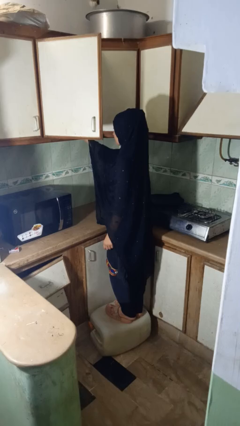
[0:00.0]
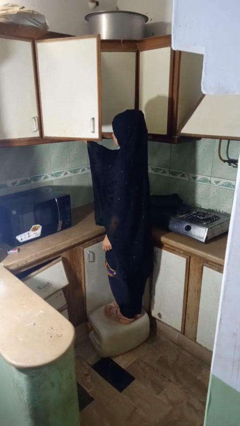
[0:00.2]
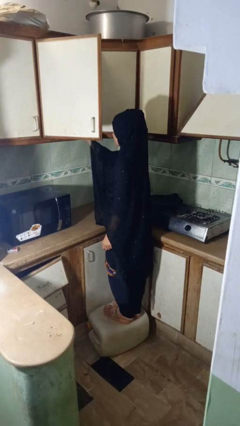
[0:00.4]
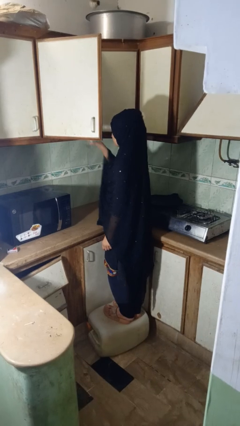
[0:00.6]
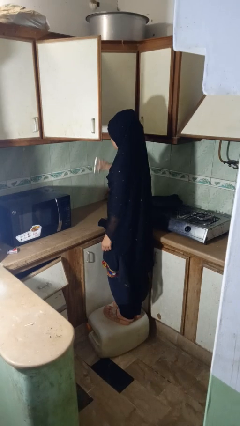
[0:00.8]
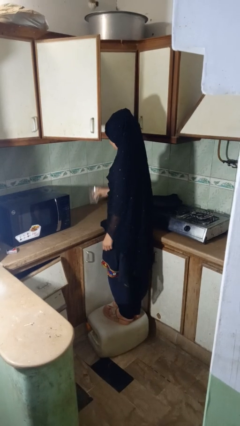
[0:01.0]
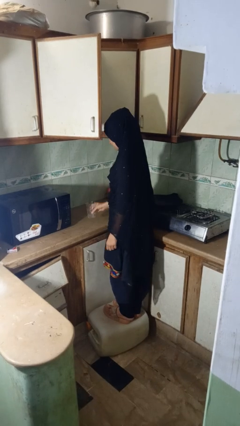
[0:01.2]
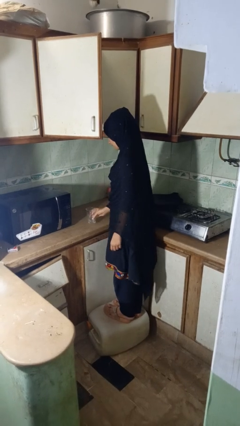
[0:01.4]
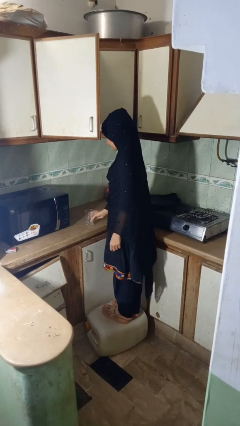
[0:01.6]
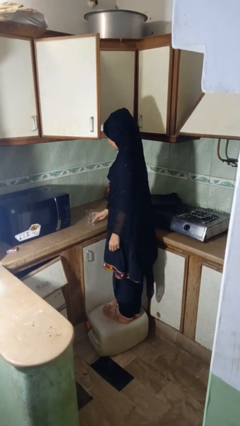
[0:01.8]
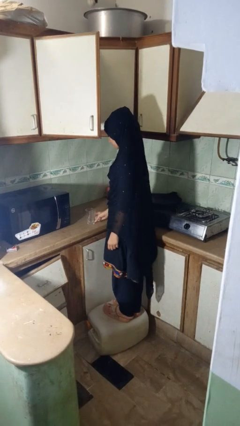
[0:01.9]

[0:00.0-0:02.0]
person puts down object into cabinet

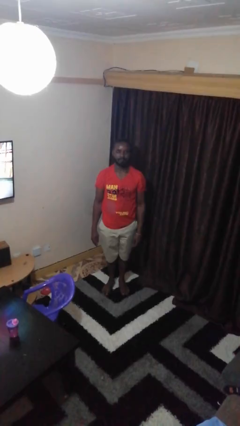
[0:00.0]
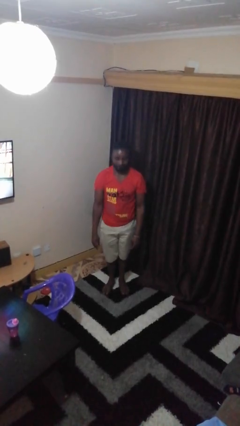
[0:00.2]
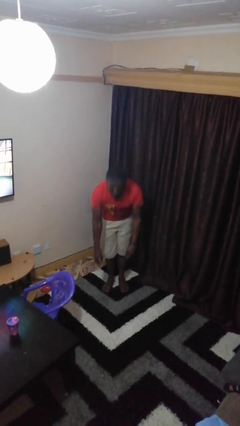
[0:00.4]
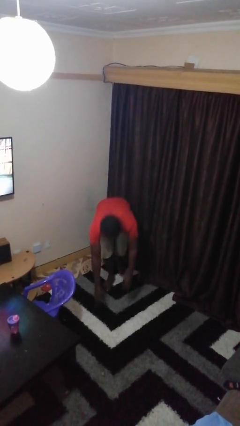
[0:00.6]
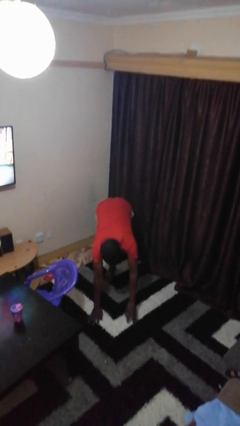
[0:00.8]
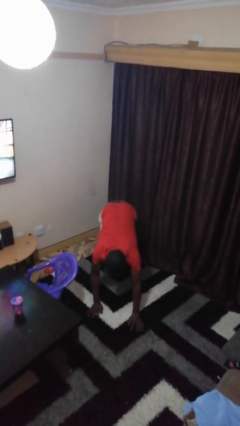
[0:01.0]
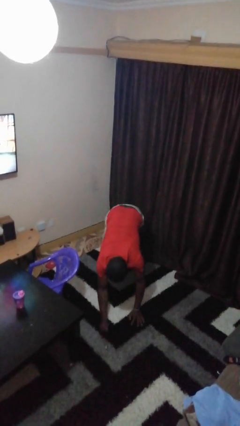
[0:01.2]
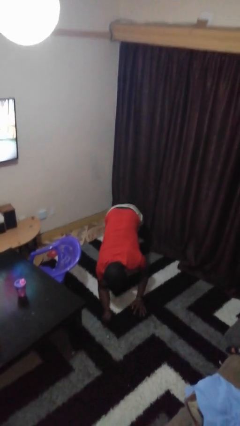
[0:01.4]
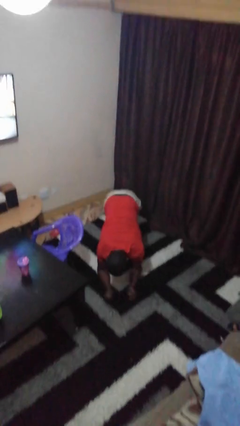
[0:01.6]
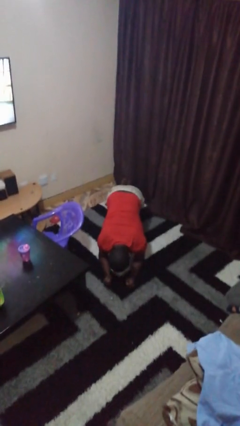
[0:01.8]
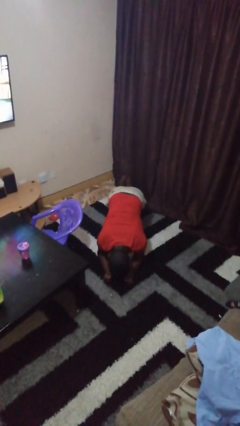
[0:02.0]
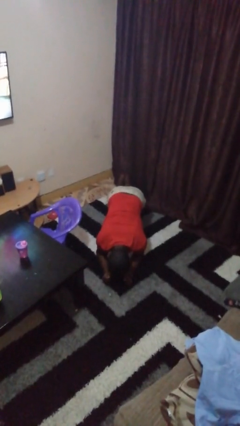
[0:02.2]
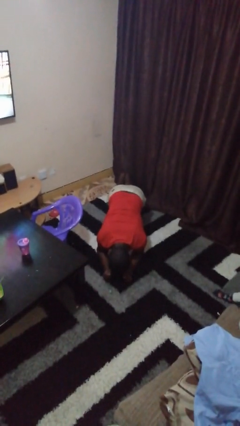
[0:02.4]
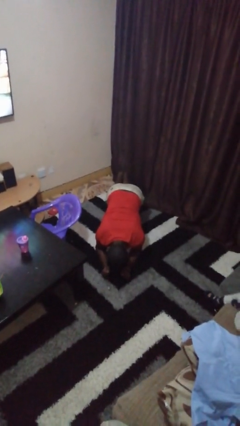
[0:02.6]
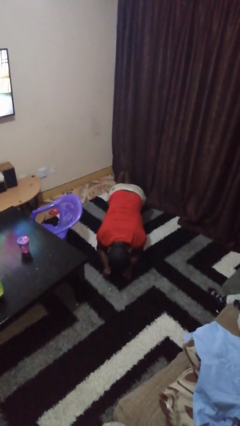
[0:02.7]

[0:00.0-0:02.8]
person exercises with plank

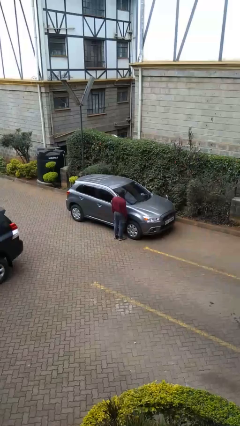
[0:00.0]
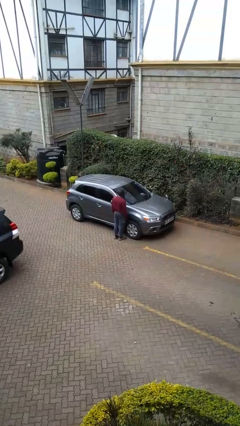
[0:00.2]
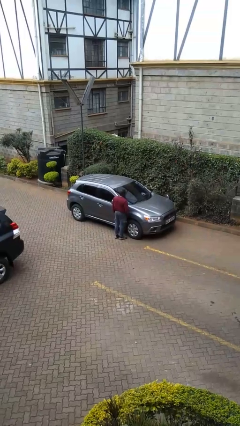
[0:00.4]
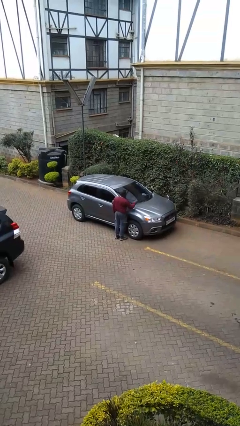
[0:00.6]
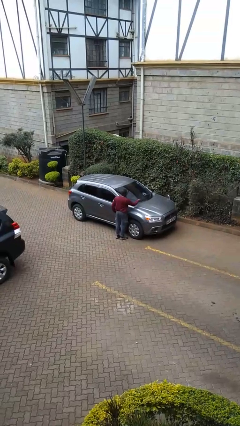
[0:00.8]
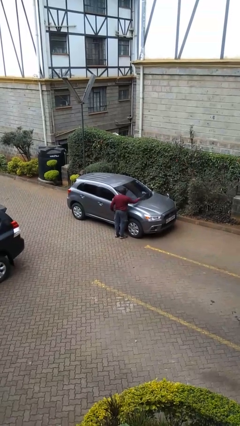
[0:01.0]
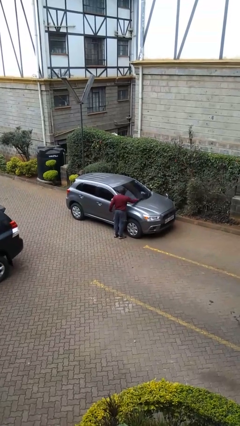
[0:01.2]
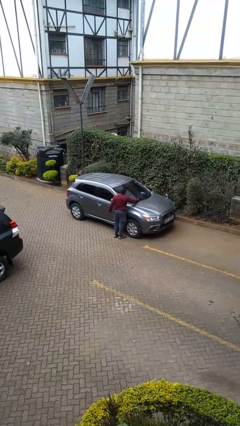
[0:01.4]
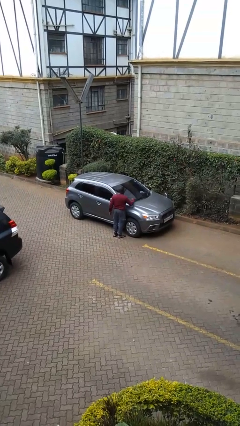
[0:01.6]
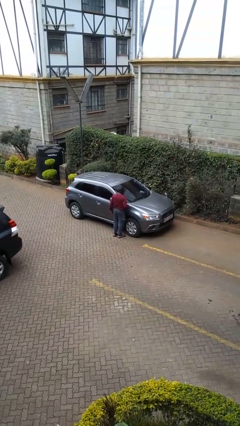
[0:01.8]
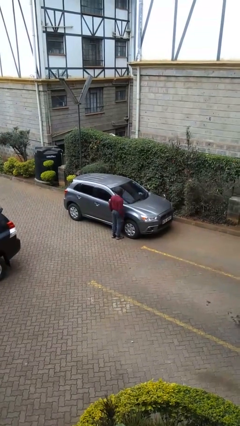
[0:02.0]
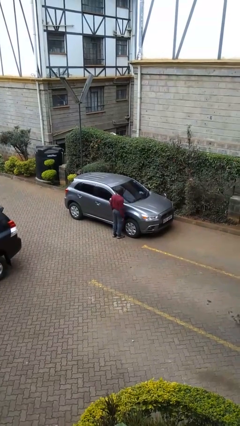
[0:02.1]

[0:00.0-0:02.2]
person flips down car wipers

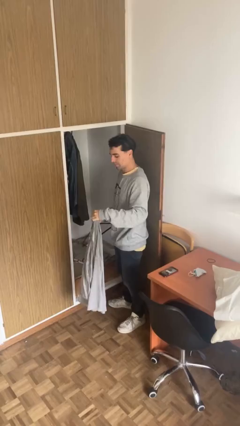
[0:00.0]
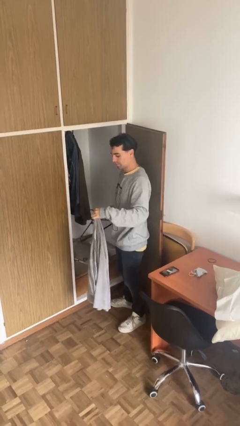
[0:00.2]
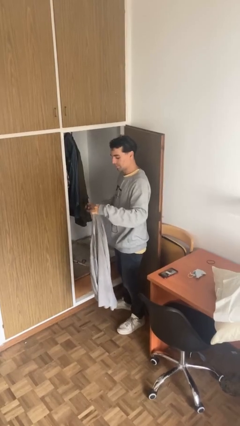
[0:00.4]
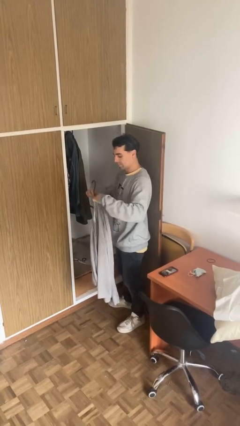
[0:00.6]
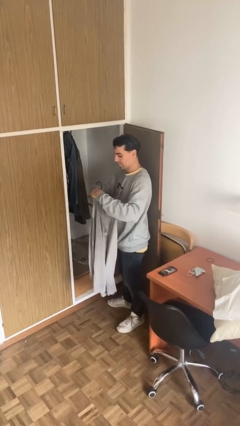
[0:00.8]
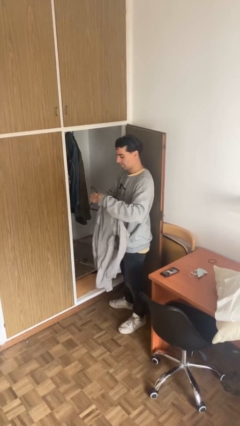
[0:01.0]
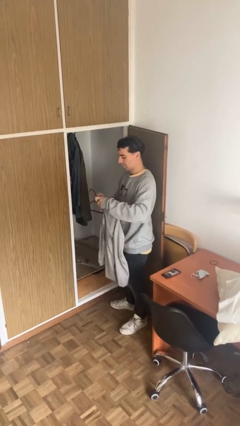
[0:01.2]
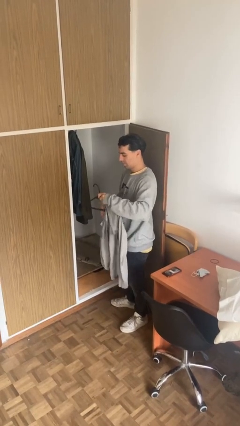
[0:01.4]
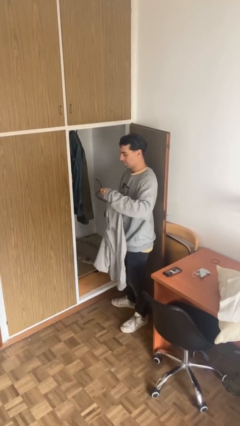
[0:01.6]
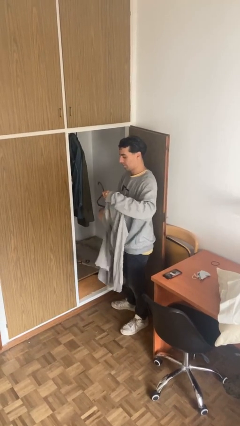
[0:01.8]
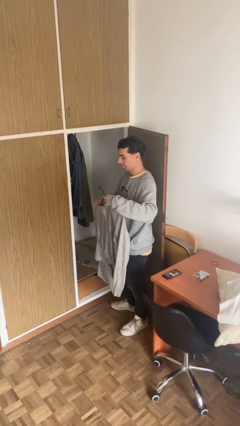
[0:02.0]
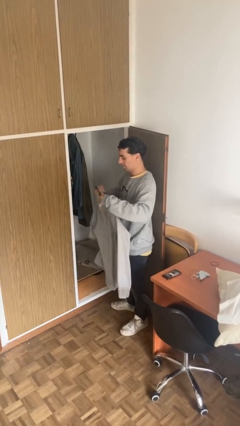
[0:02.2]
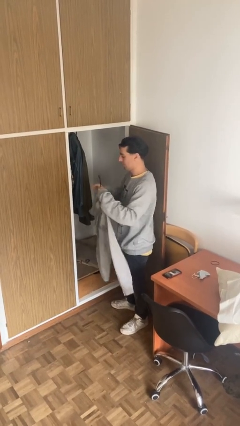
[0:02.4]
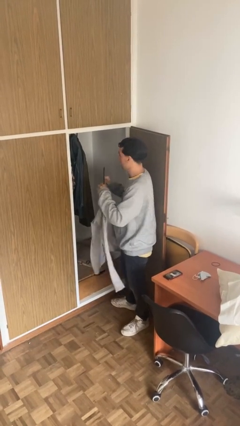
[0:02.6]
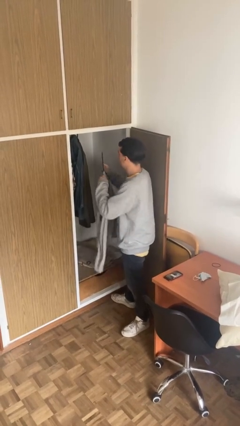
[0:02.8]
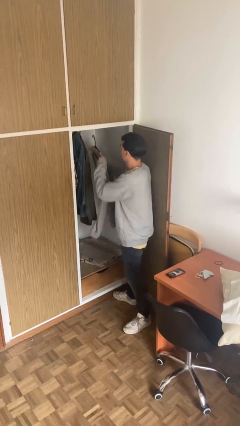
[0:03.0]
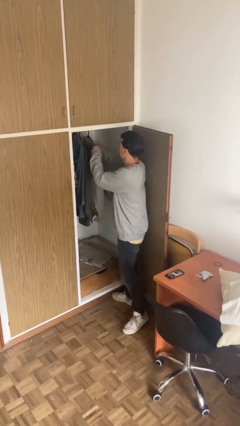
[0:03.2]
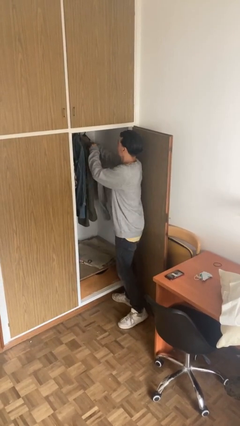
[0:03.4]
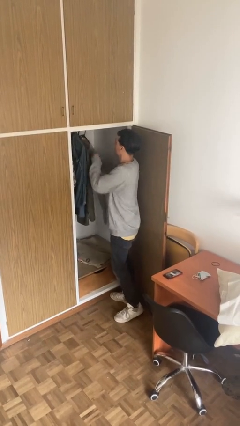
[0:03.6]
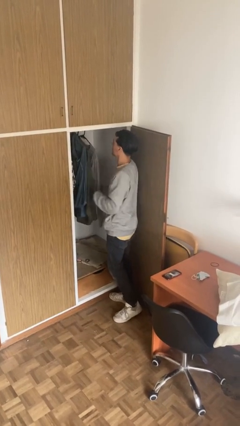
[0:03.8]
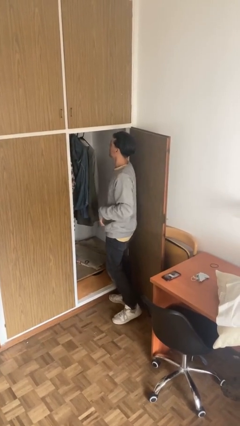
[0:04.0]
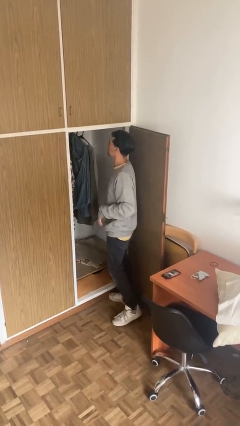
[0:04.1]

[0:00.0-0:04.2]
person puts clothes into closet

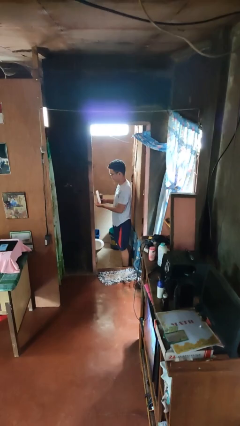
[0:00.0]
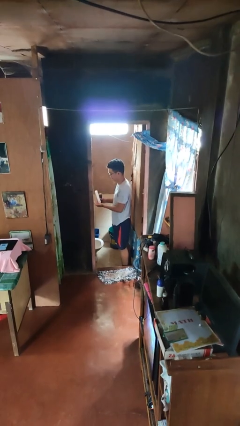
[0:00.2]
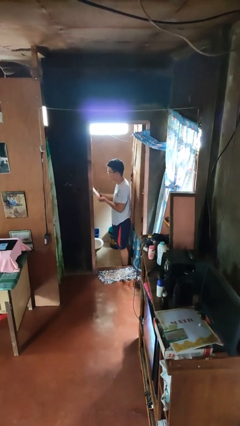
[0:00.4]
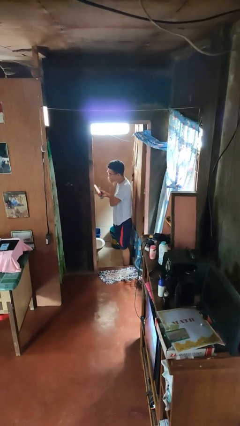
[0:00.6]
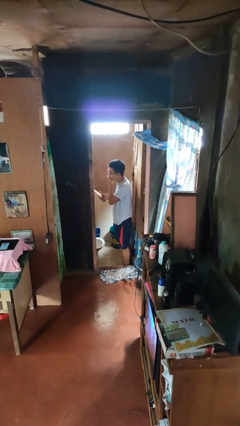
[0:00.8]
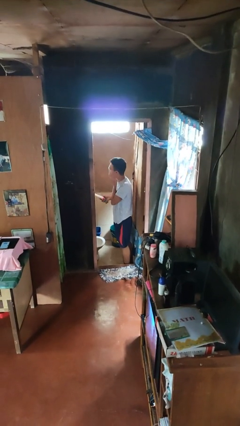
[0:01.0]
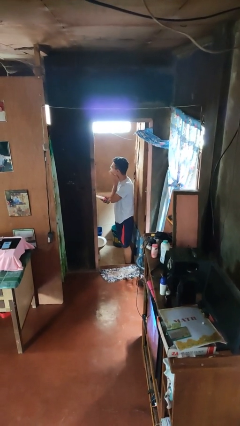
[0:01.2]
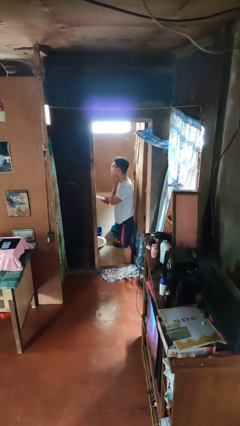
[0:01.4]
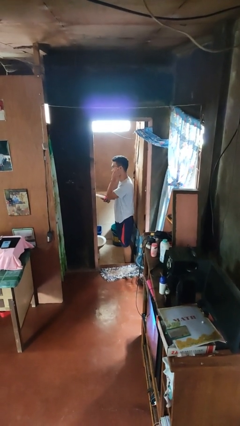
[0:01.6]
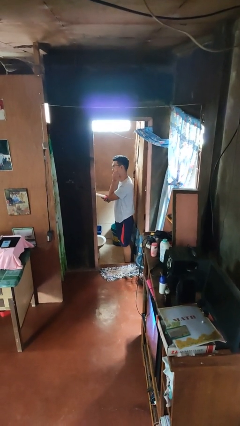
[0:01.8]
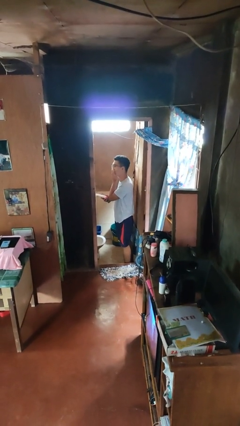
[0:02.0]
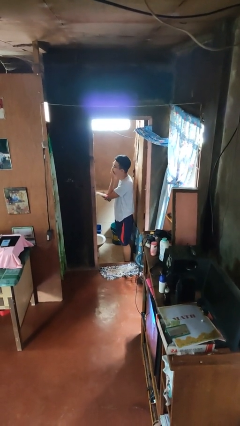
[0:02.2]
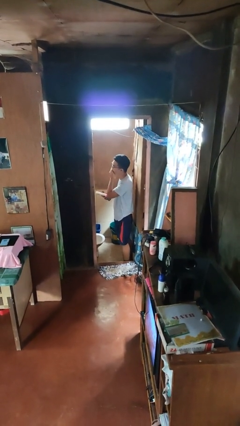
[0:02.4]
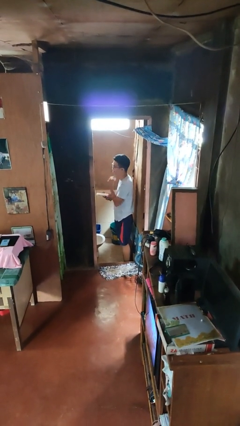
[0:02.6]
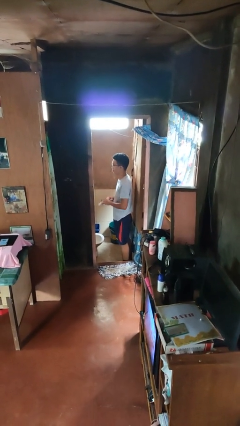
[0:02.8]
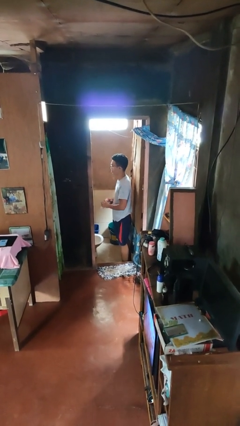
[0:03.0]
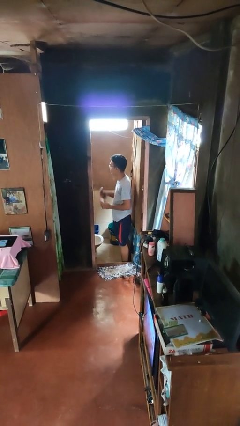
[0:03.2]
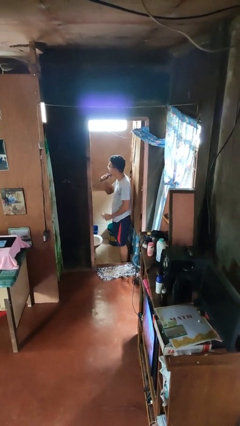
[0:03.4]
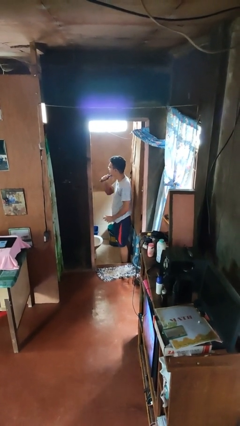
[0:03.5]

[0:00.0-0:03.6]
person applies shaving cream

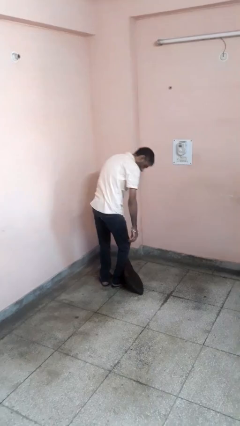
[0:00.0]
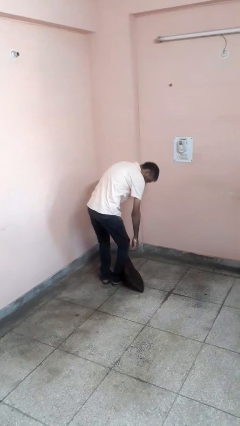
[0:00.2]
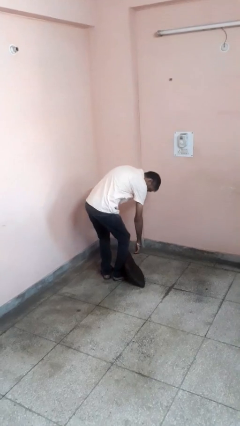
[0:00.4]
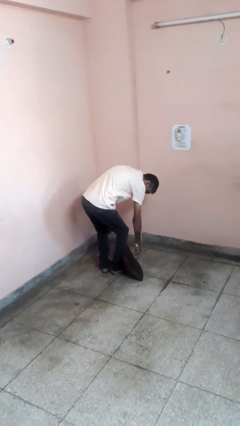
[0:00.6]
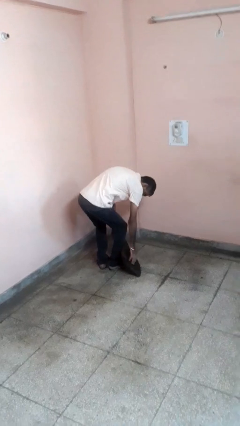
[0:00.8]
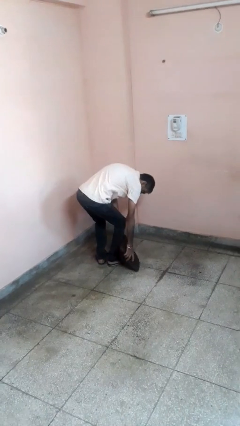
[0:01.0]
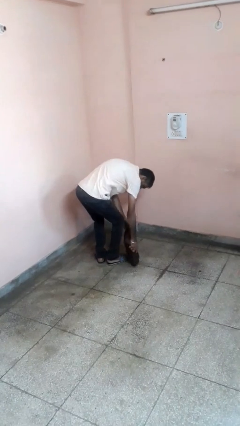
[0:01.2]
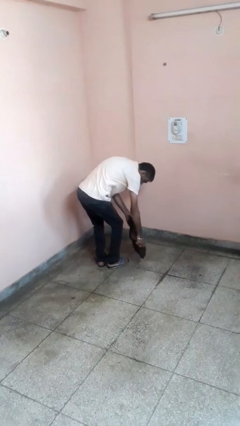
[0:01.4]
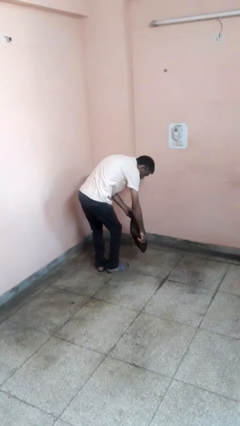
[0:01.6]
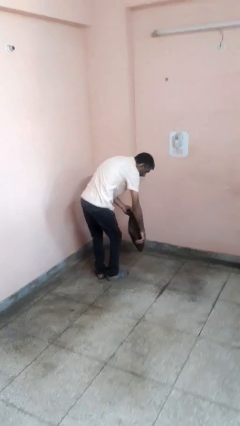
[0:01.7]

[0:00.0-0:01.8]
person picks up object from floor

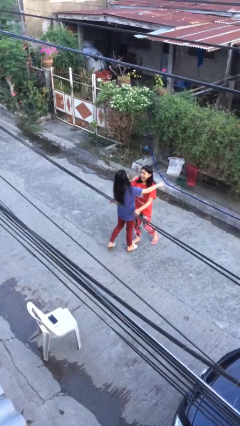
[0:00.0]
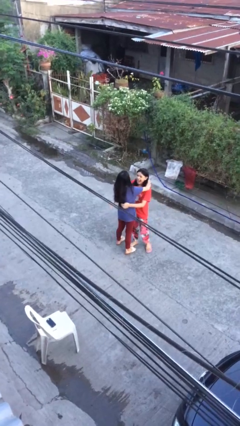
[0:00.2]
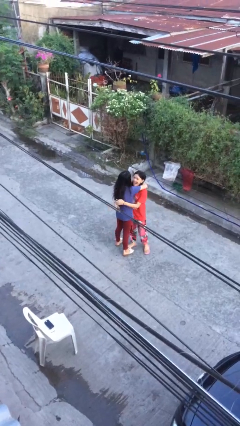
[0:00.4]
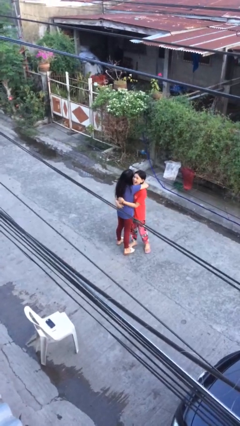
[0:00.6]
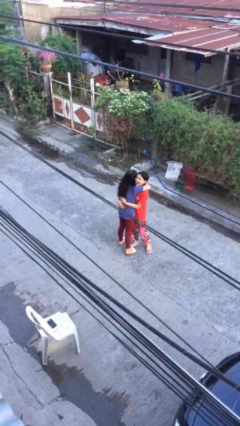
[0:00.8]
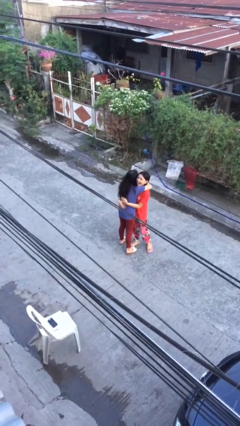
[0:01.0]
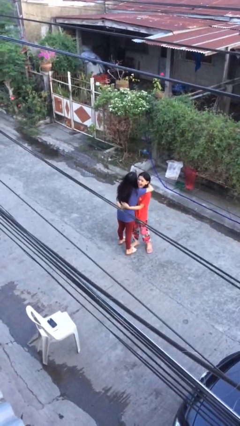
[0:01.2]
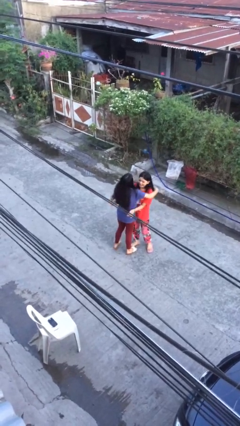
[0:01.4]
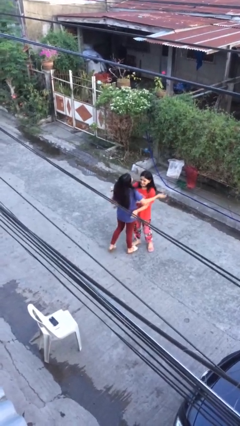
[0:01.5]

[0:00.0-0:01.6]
person embraces person
